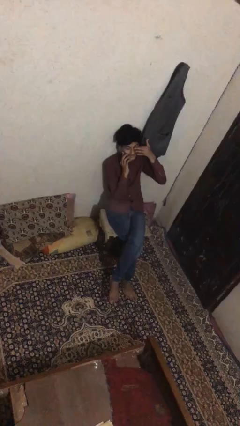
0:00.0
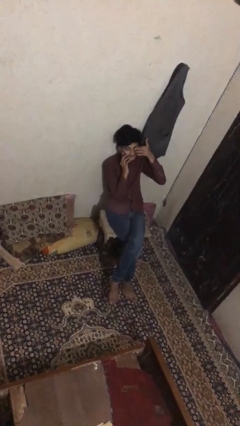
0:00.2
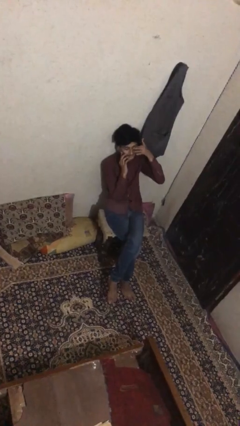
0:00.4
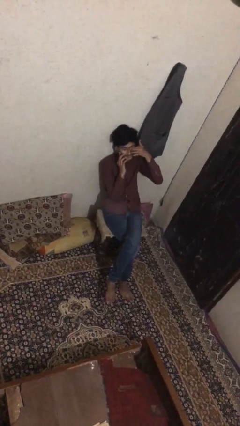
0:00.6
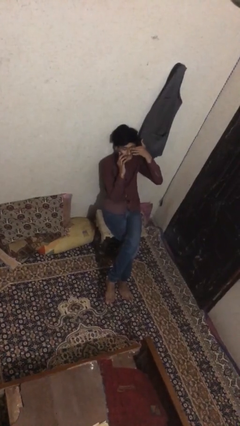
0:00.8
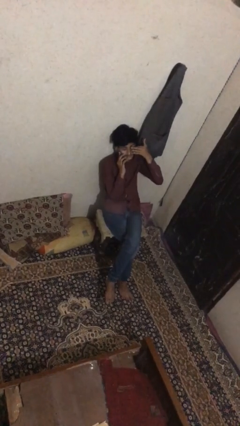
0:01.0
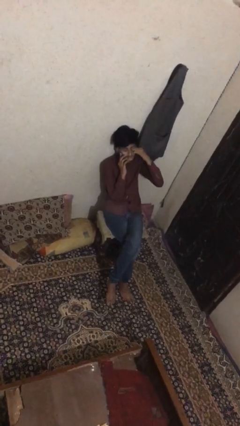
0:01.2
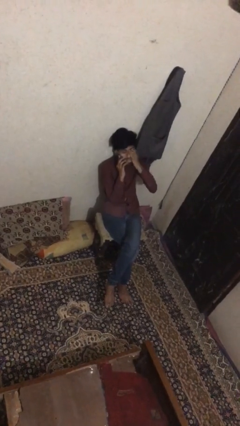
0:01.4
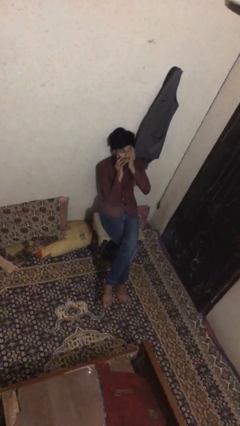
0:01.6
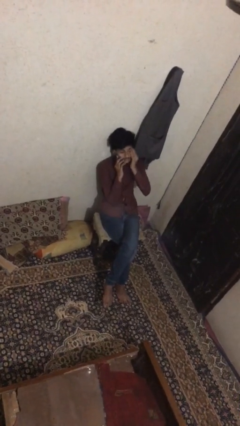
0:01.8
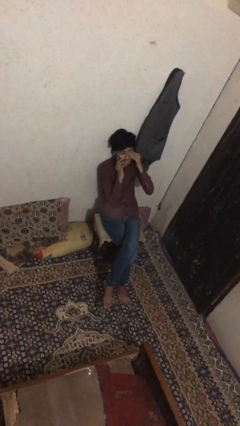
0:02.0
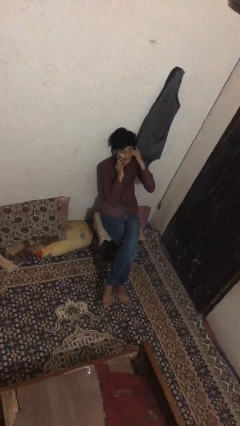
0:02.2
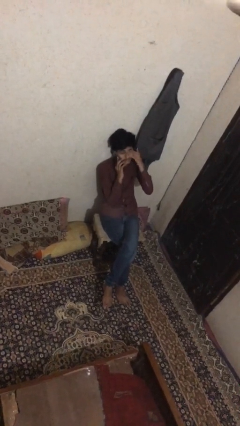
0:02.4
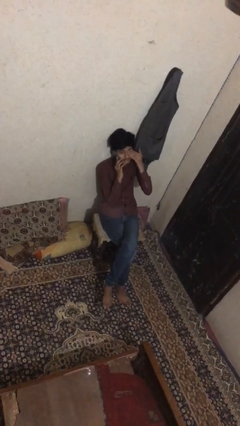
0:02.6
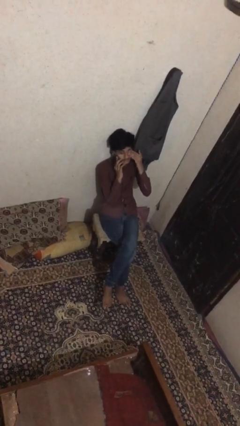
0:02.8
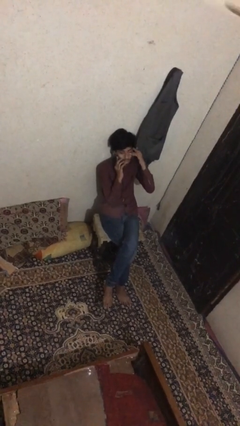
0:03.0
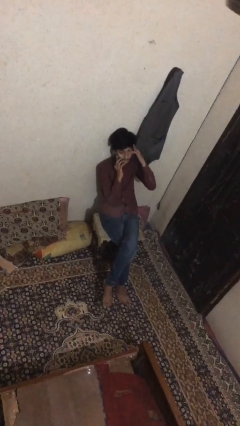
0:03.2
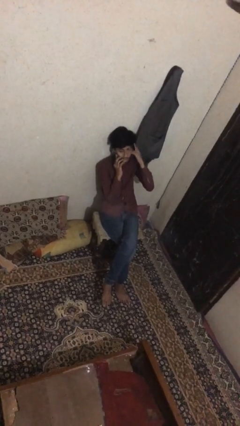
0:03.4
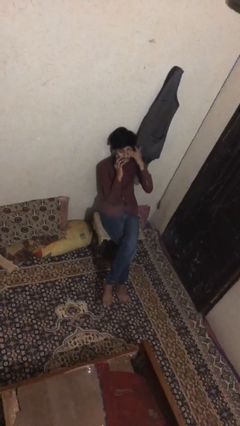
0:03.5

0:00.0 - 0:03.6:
person talks on phone

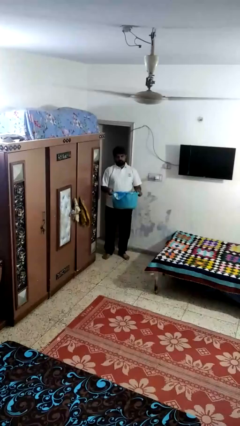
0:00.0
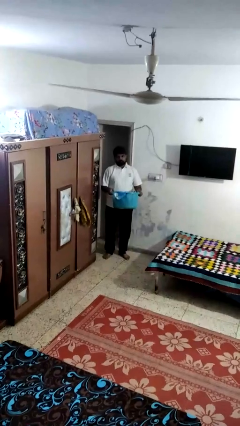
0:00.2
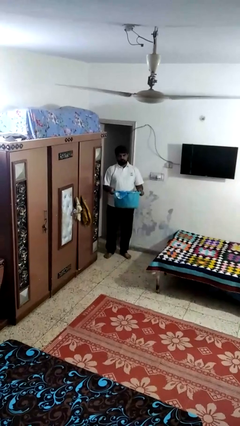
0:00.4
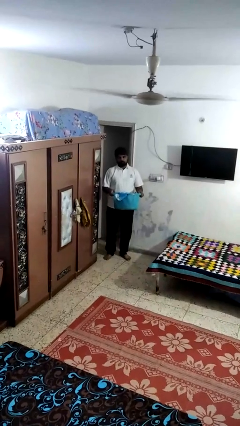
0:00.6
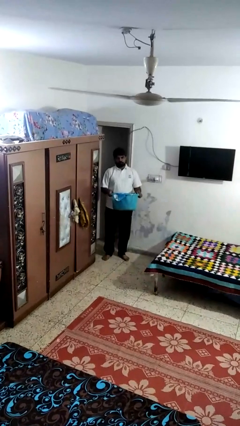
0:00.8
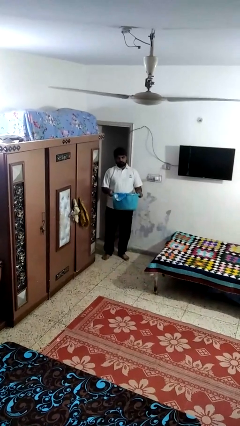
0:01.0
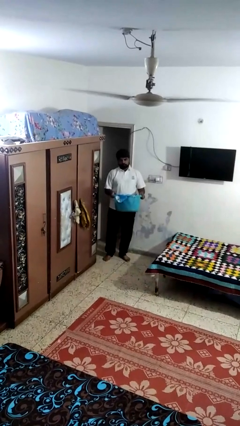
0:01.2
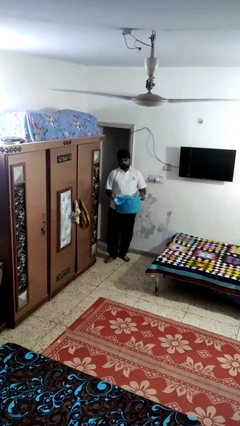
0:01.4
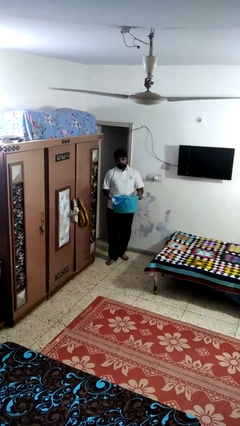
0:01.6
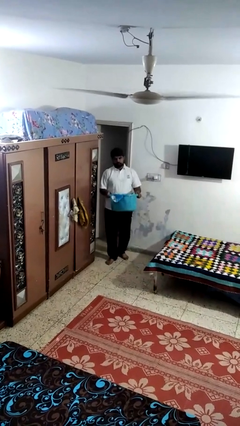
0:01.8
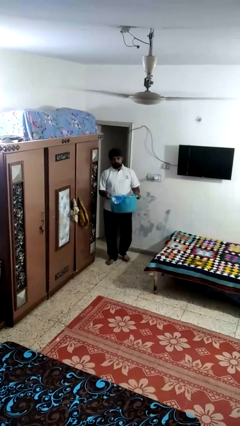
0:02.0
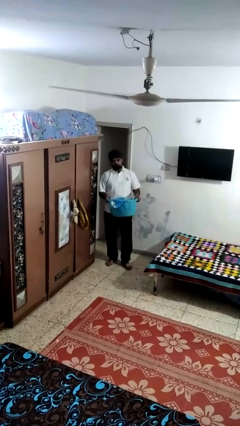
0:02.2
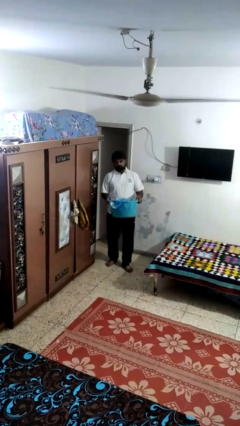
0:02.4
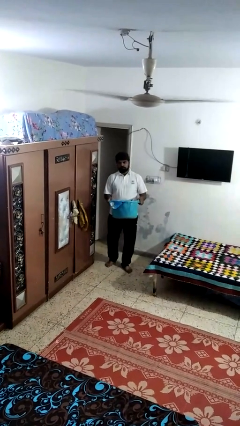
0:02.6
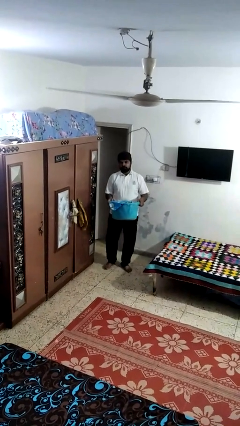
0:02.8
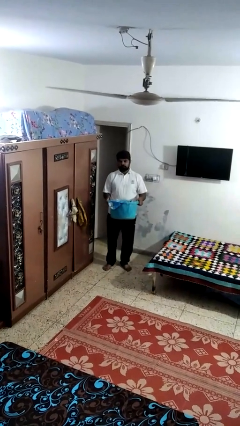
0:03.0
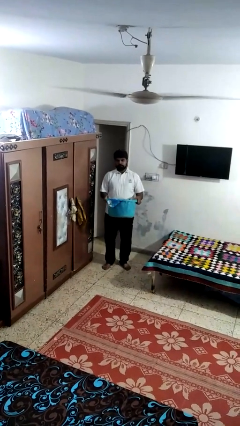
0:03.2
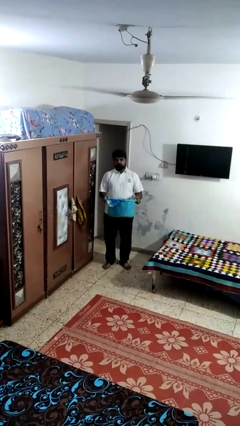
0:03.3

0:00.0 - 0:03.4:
person carries laundry basket

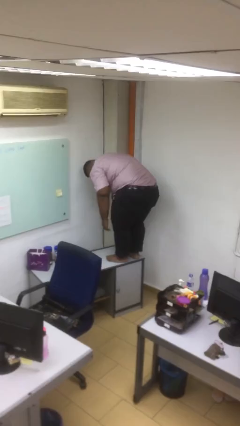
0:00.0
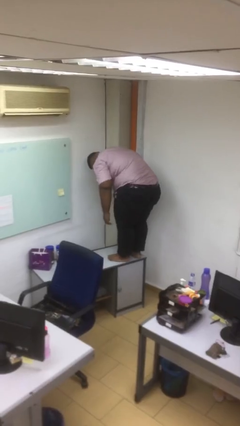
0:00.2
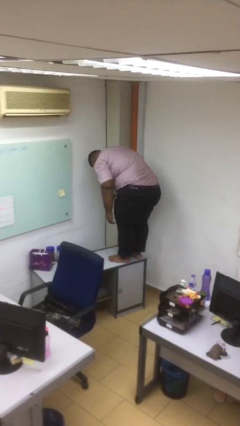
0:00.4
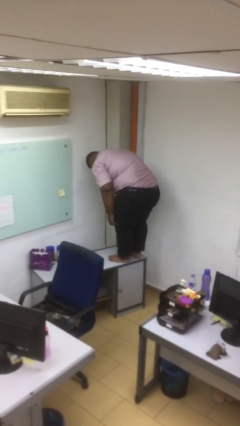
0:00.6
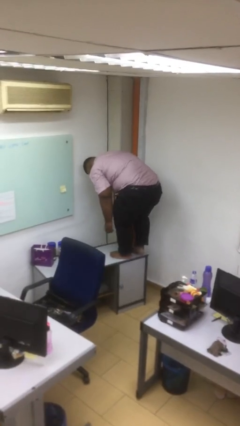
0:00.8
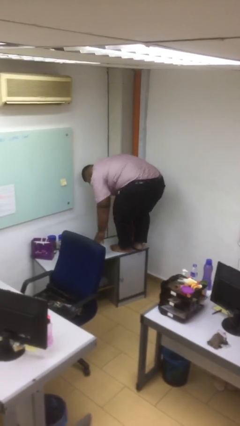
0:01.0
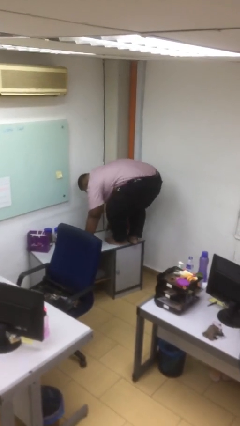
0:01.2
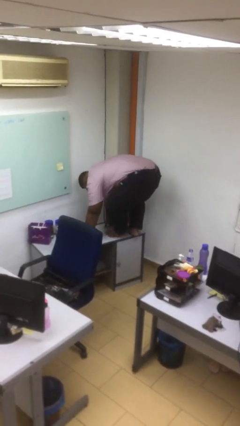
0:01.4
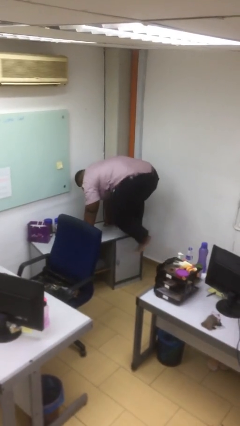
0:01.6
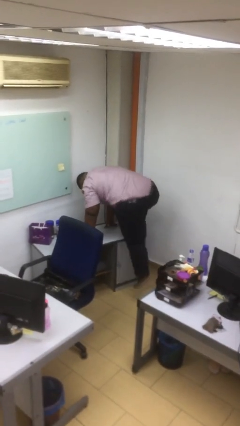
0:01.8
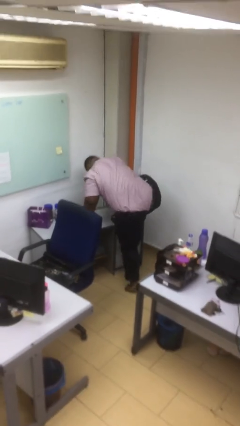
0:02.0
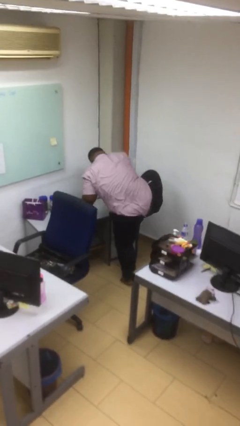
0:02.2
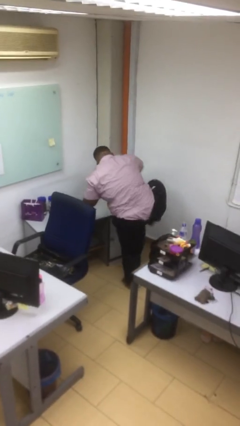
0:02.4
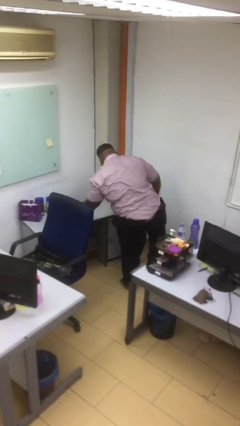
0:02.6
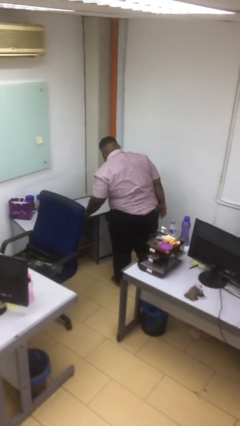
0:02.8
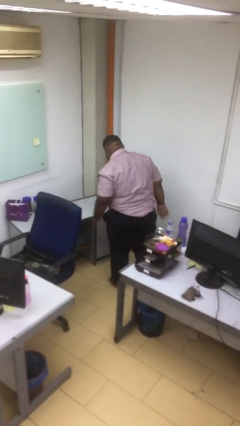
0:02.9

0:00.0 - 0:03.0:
person climbs off table

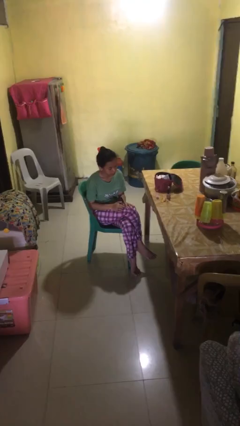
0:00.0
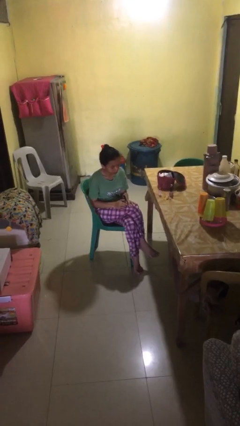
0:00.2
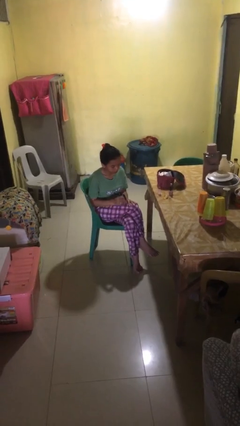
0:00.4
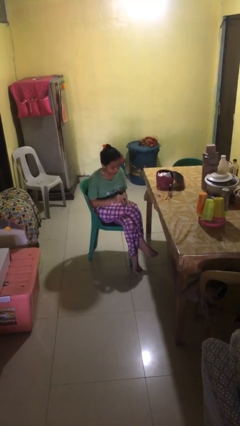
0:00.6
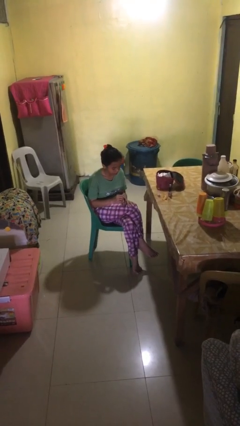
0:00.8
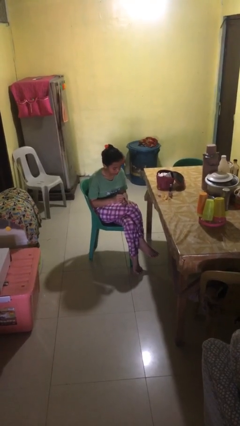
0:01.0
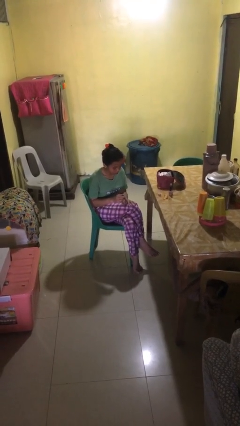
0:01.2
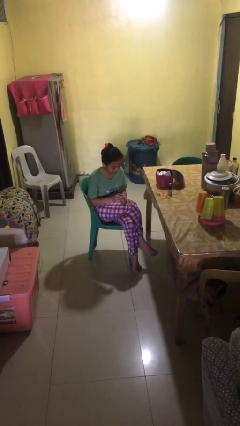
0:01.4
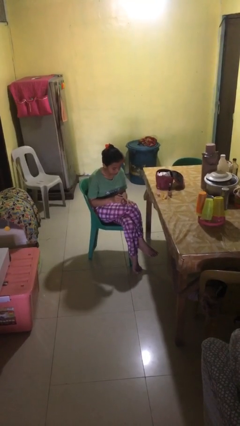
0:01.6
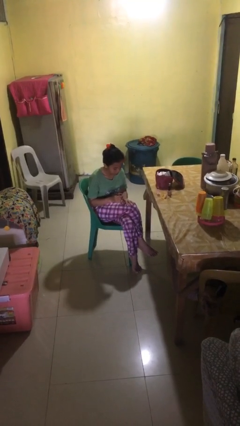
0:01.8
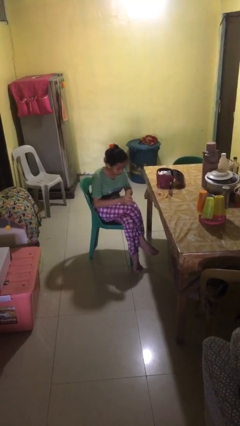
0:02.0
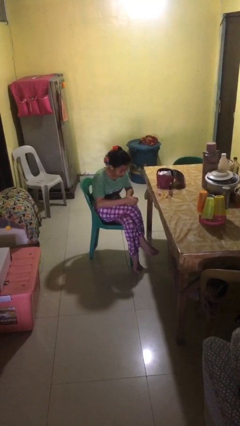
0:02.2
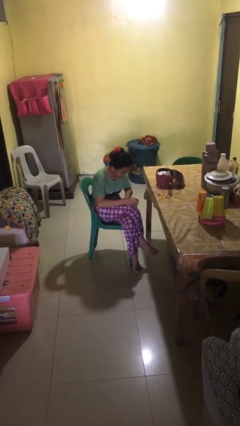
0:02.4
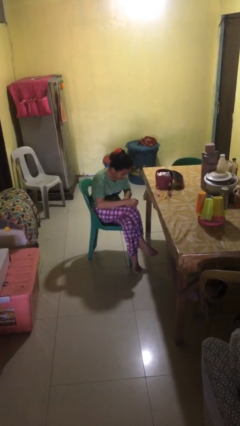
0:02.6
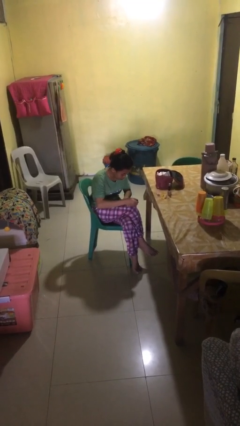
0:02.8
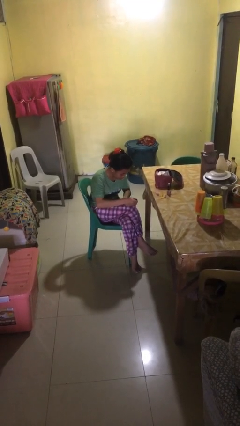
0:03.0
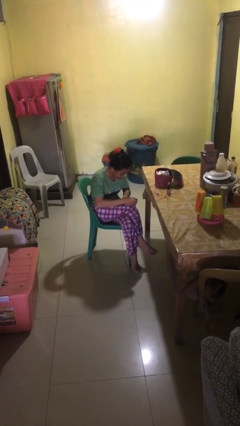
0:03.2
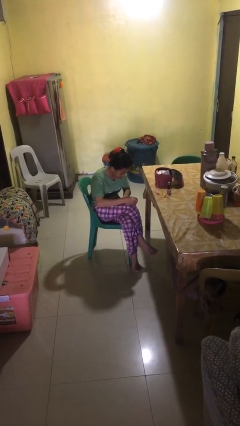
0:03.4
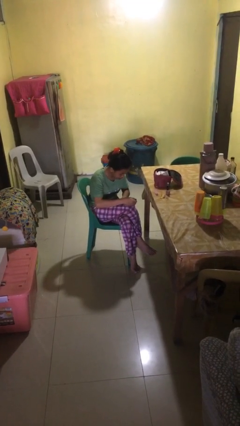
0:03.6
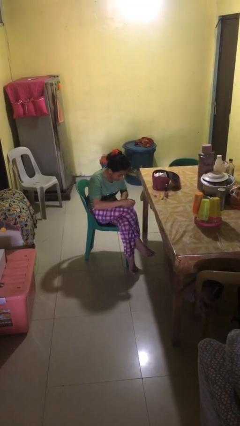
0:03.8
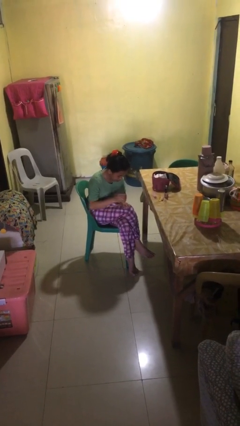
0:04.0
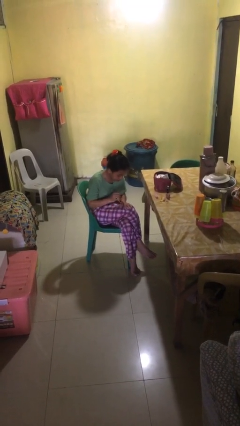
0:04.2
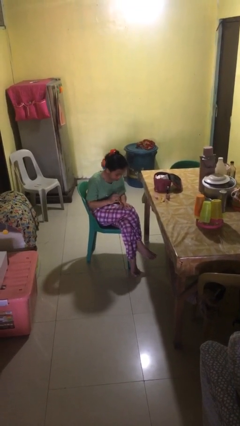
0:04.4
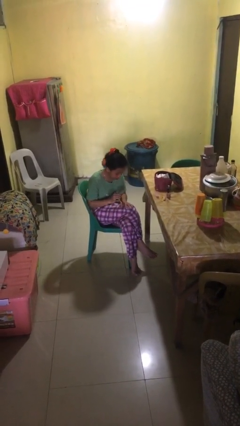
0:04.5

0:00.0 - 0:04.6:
person paints fingernails

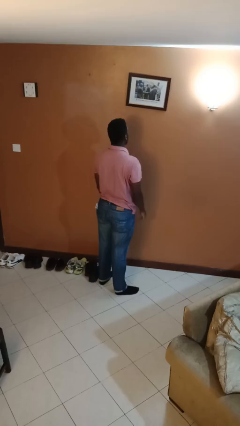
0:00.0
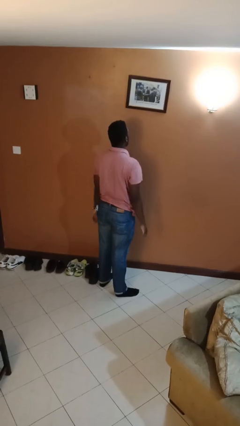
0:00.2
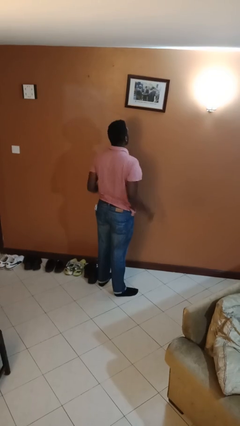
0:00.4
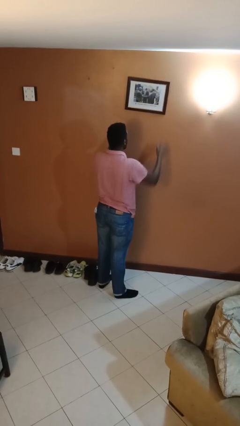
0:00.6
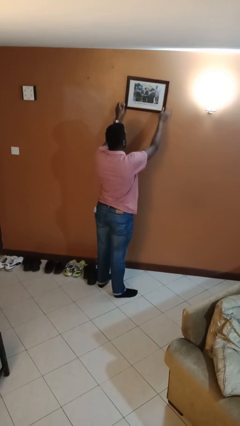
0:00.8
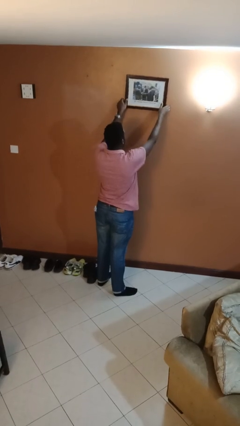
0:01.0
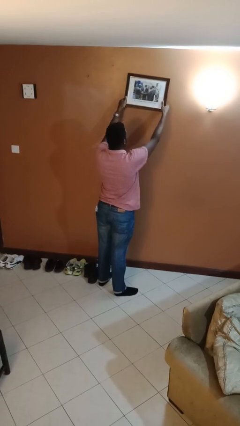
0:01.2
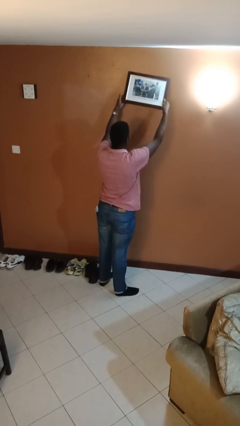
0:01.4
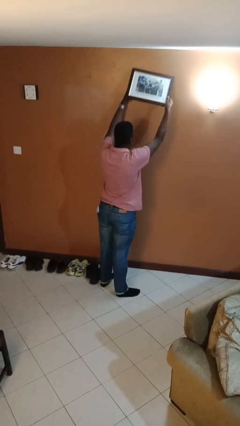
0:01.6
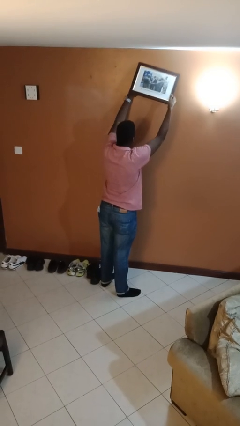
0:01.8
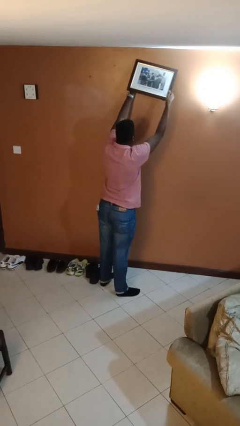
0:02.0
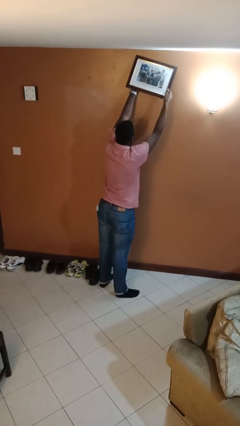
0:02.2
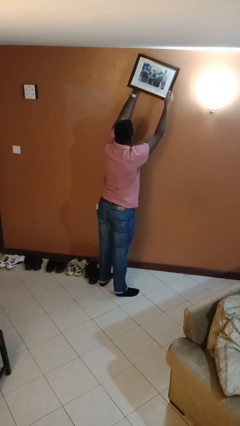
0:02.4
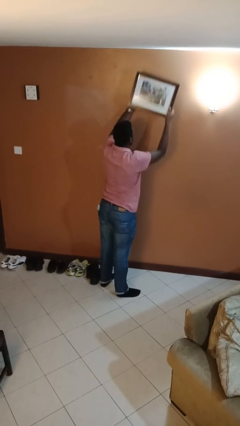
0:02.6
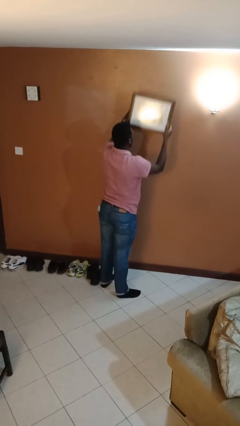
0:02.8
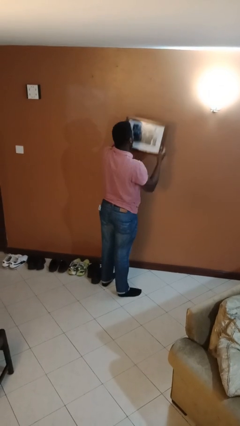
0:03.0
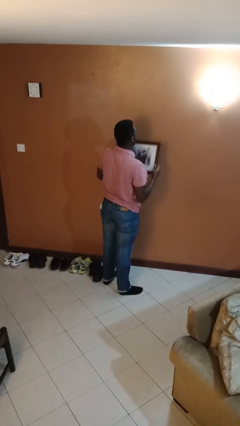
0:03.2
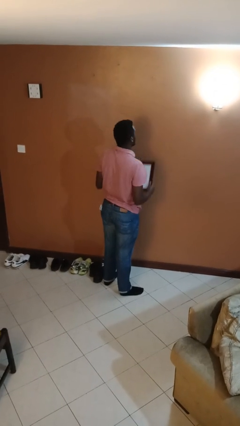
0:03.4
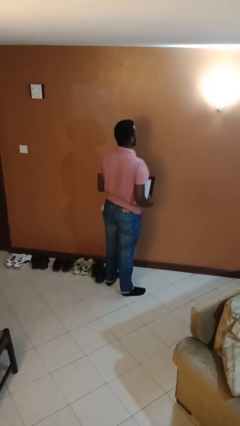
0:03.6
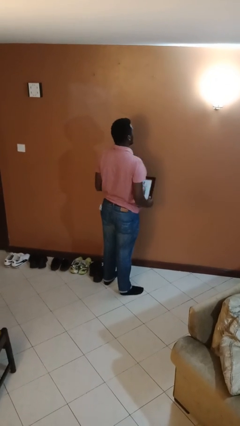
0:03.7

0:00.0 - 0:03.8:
person takes down picture frame
